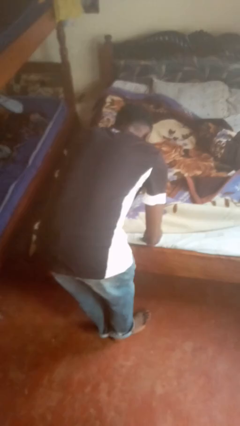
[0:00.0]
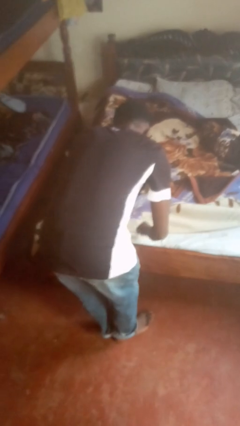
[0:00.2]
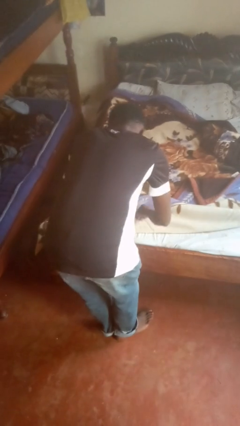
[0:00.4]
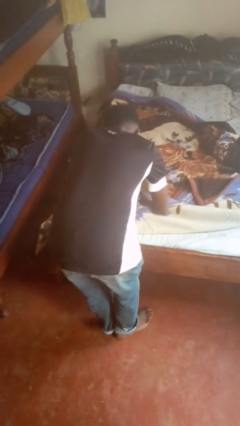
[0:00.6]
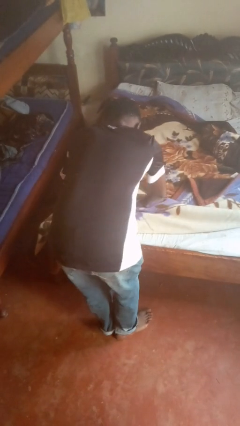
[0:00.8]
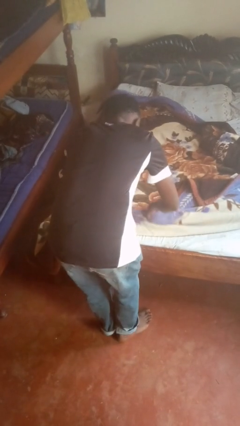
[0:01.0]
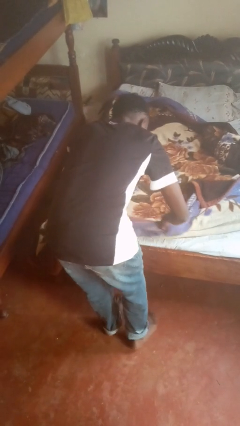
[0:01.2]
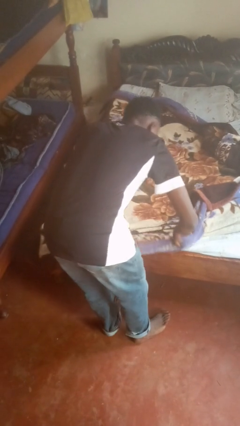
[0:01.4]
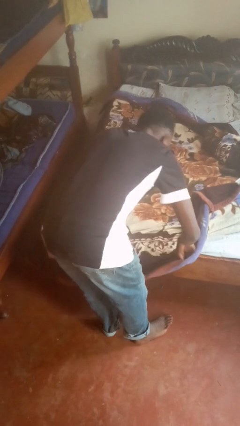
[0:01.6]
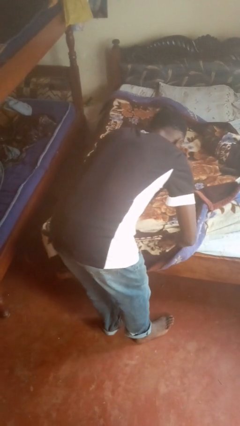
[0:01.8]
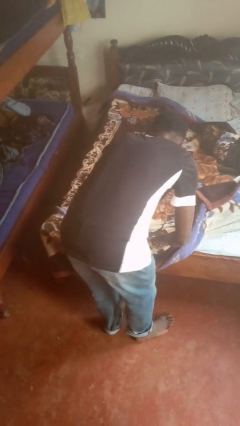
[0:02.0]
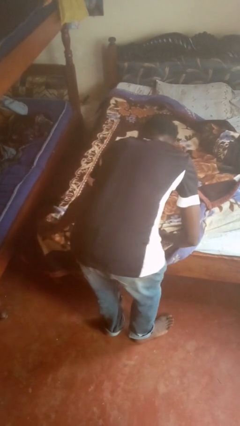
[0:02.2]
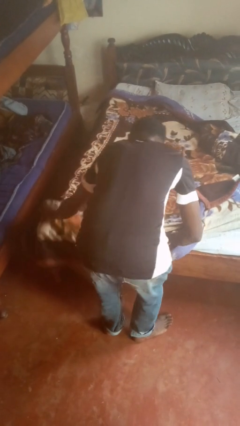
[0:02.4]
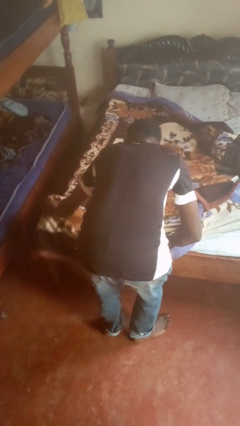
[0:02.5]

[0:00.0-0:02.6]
person makes bed

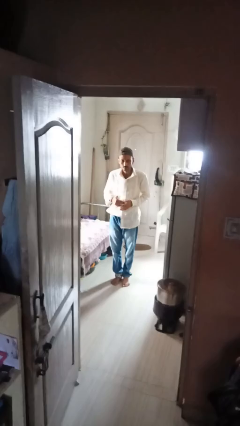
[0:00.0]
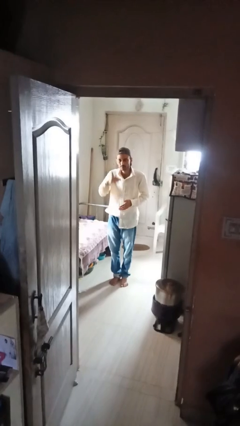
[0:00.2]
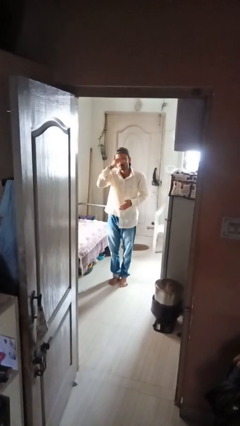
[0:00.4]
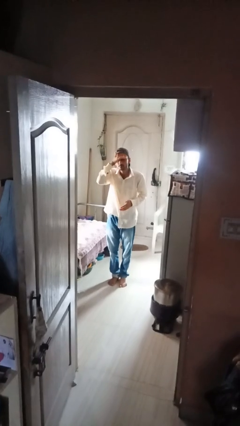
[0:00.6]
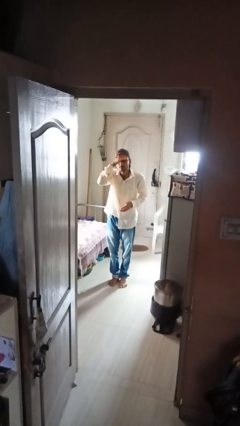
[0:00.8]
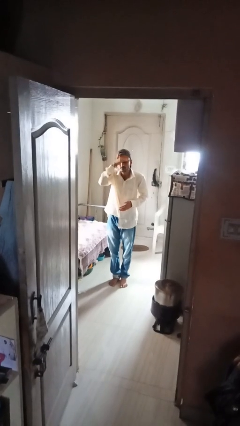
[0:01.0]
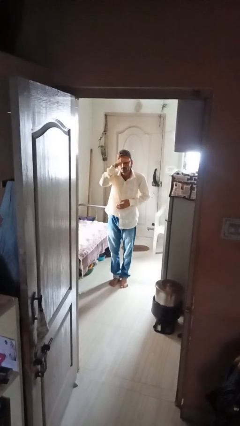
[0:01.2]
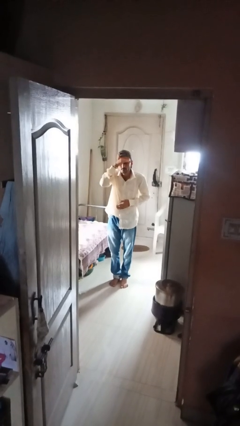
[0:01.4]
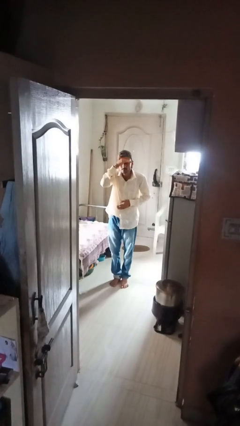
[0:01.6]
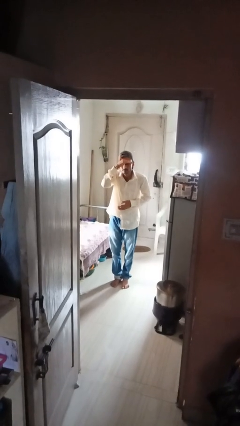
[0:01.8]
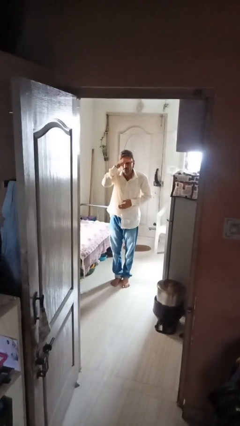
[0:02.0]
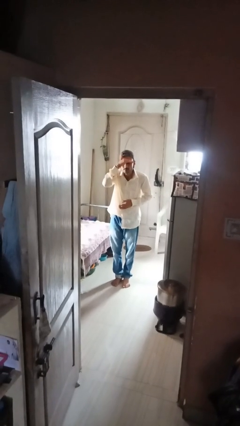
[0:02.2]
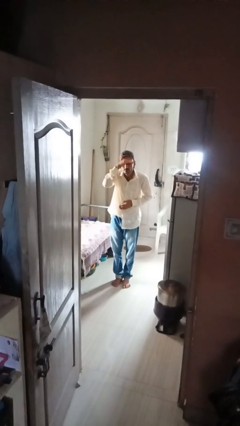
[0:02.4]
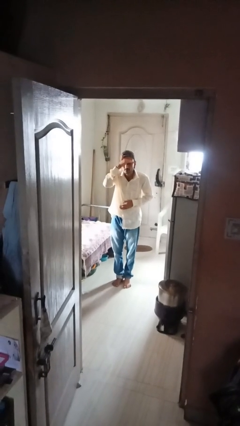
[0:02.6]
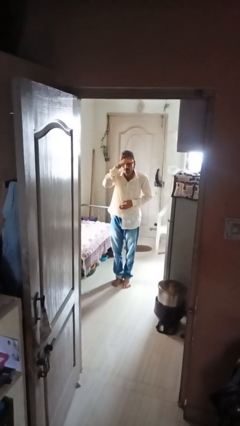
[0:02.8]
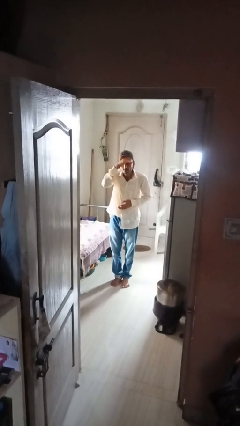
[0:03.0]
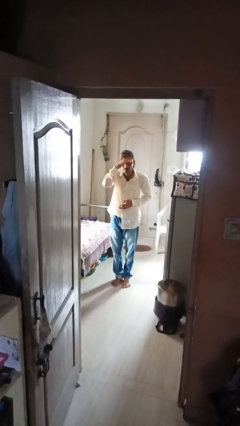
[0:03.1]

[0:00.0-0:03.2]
person shades eyes

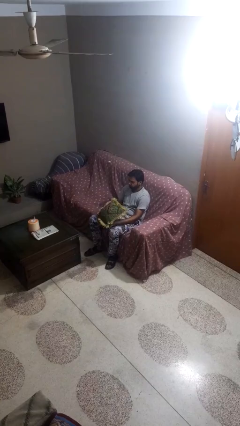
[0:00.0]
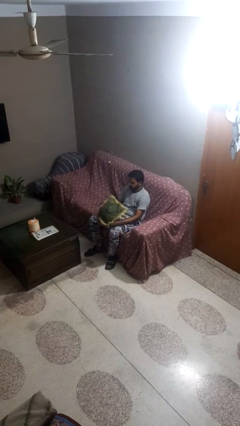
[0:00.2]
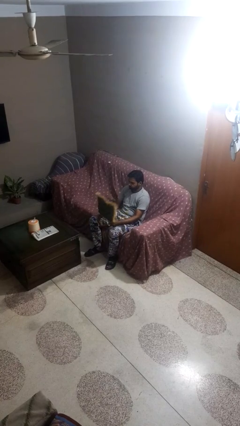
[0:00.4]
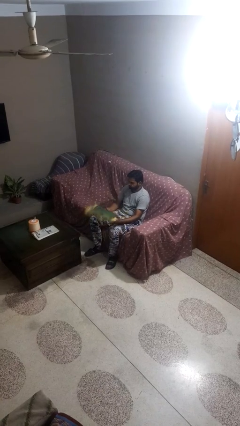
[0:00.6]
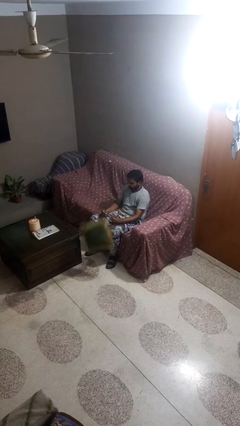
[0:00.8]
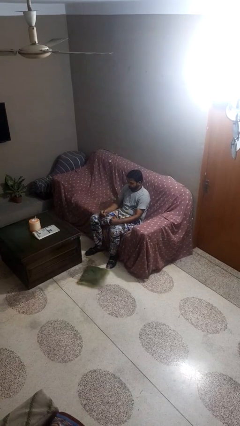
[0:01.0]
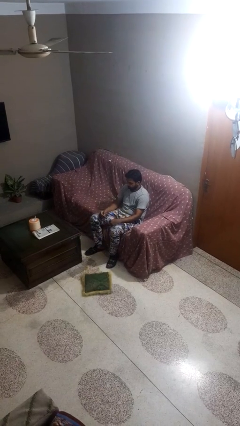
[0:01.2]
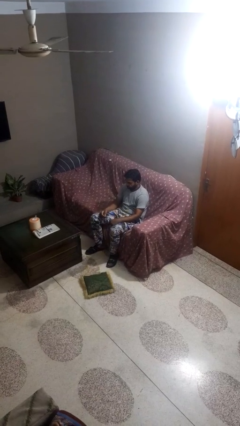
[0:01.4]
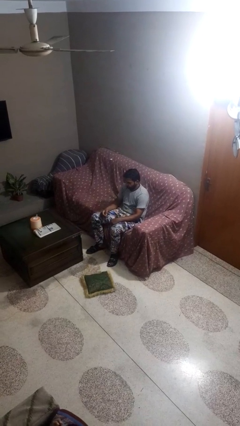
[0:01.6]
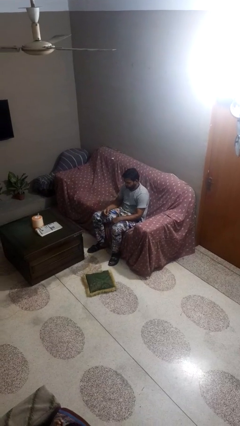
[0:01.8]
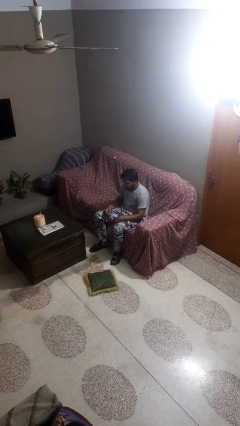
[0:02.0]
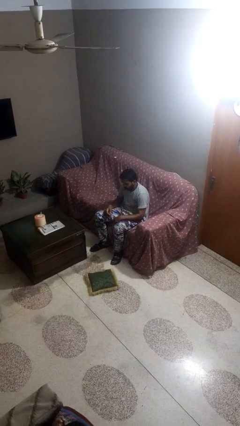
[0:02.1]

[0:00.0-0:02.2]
person drops object

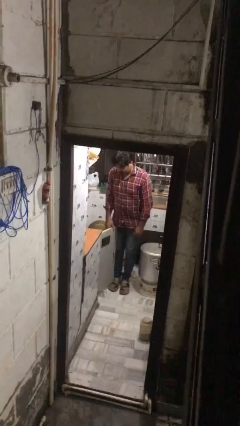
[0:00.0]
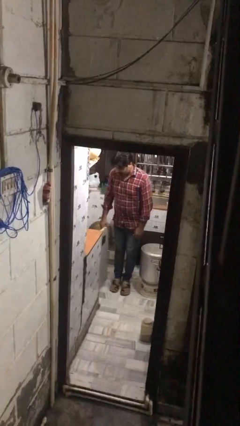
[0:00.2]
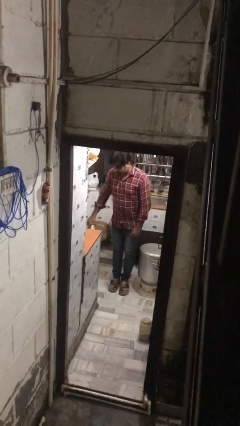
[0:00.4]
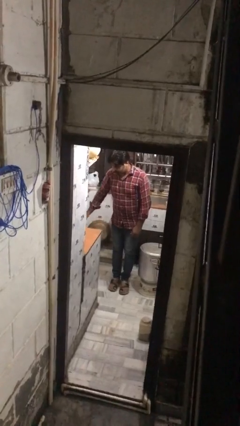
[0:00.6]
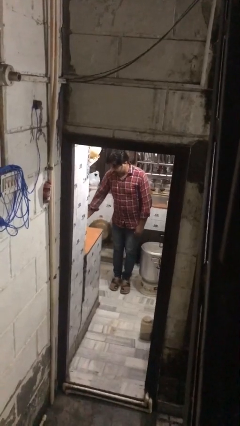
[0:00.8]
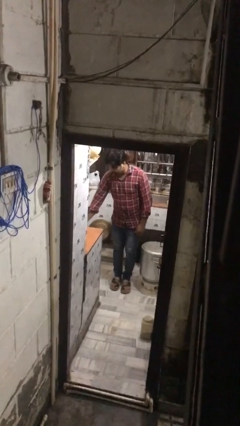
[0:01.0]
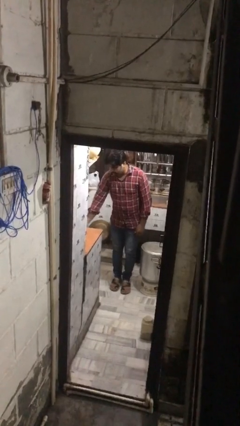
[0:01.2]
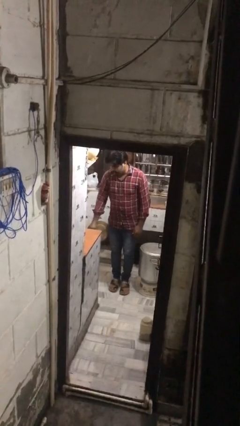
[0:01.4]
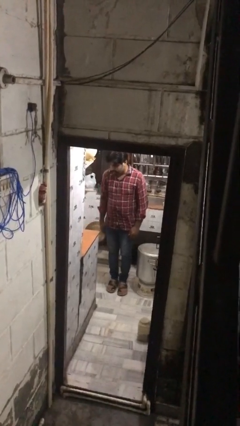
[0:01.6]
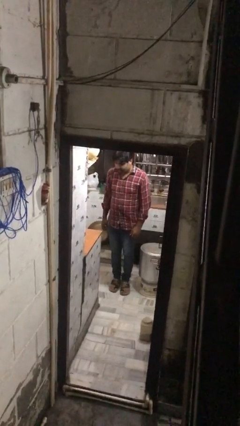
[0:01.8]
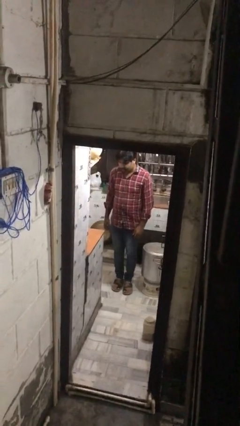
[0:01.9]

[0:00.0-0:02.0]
person closes kitchen drawer

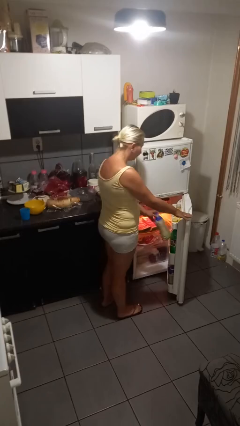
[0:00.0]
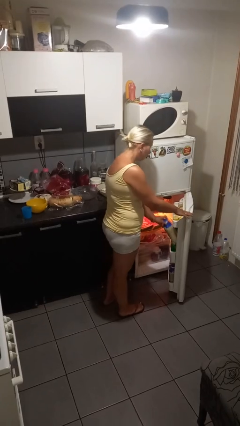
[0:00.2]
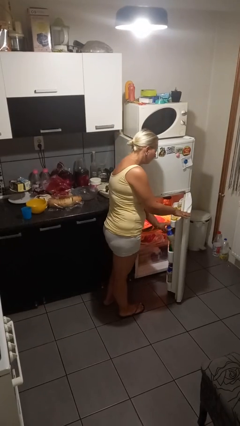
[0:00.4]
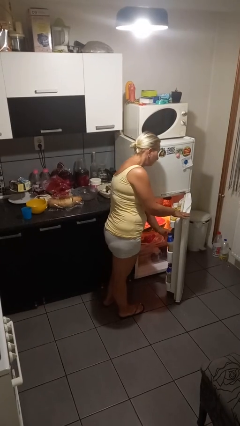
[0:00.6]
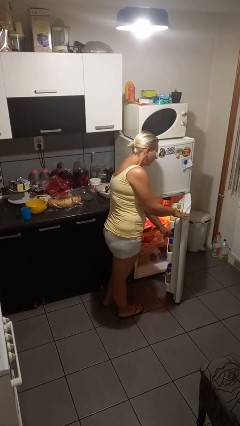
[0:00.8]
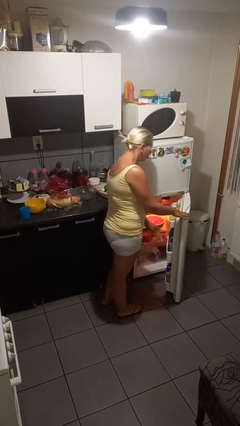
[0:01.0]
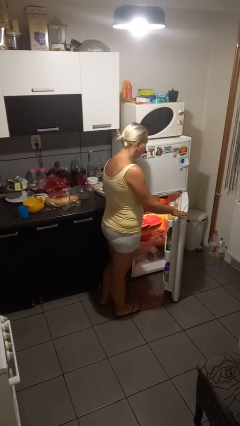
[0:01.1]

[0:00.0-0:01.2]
person puts object into refrigerator

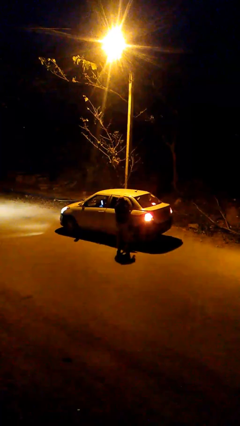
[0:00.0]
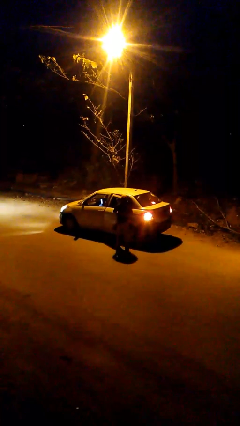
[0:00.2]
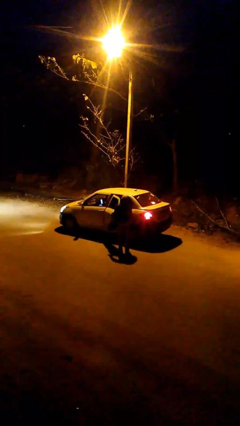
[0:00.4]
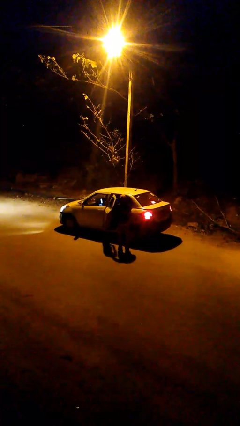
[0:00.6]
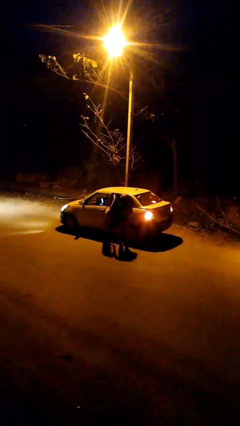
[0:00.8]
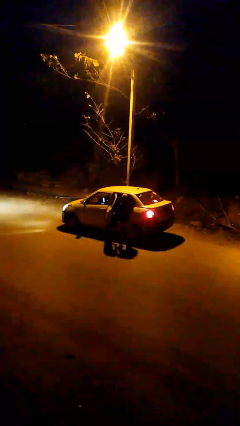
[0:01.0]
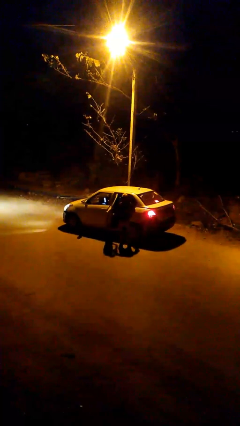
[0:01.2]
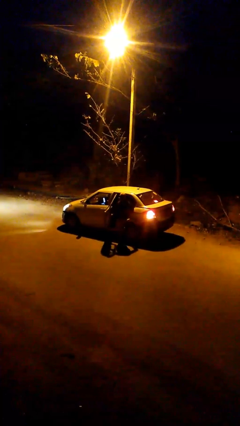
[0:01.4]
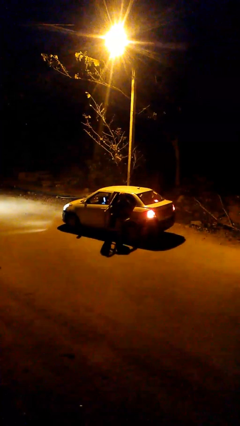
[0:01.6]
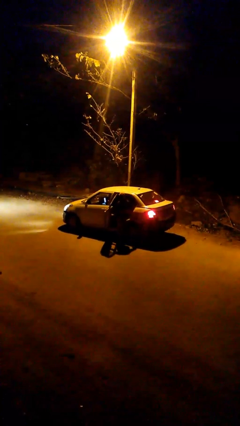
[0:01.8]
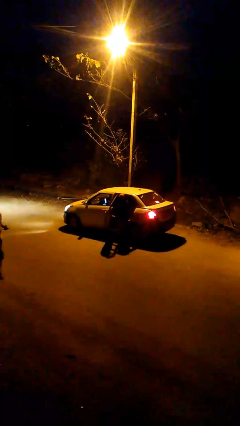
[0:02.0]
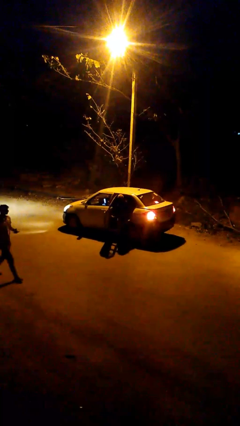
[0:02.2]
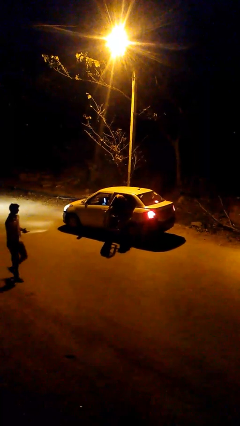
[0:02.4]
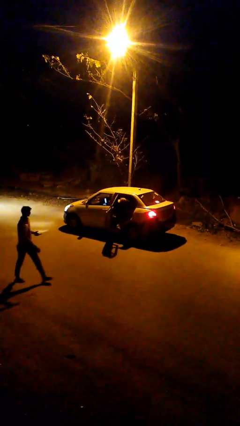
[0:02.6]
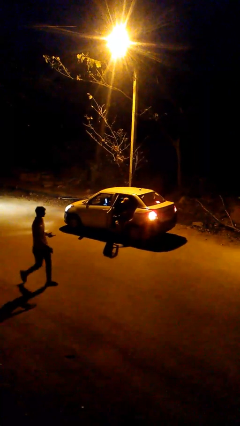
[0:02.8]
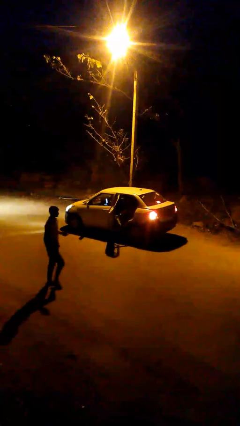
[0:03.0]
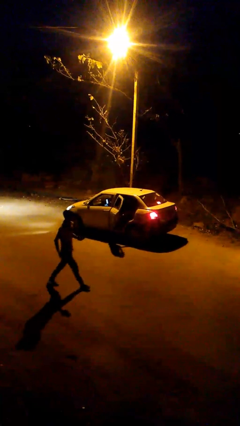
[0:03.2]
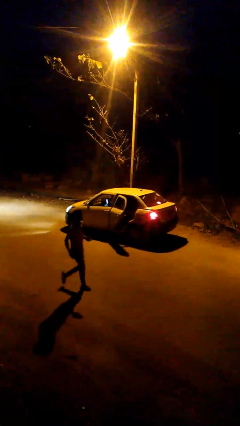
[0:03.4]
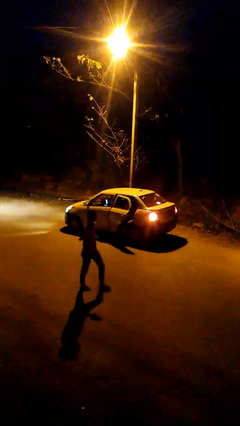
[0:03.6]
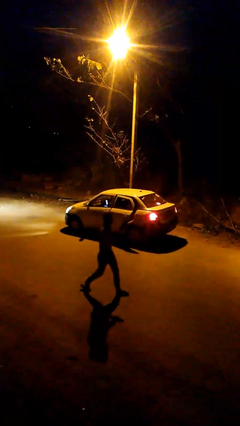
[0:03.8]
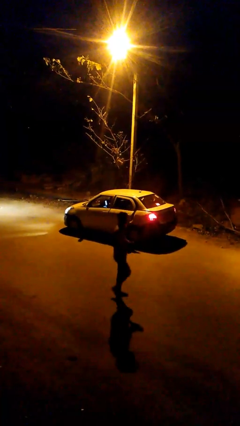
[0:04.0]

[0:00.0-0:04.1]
car picks up person

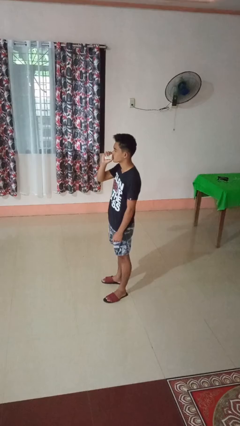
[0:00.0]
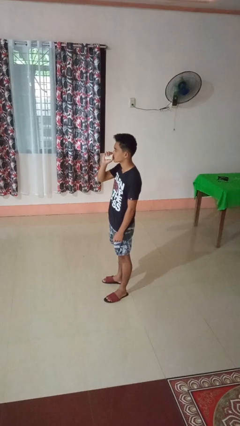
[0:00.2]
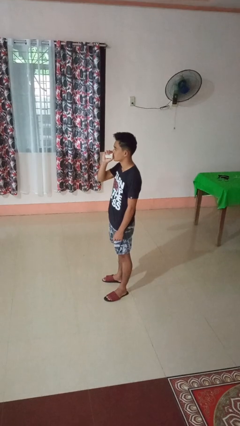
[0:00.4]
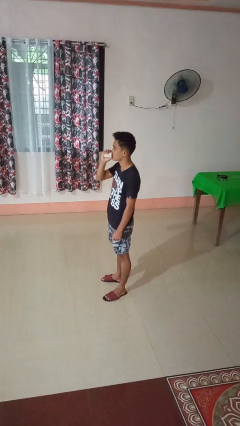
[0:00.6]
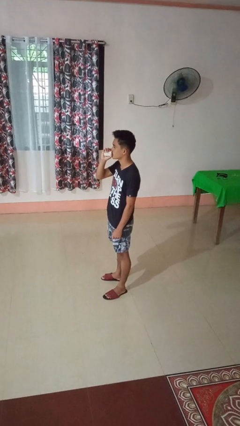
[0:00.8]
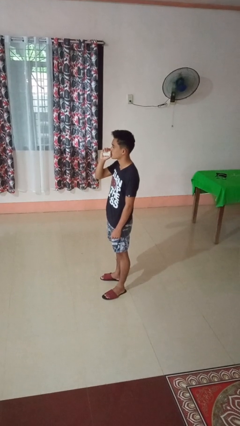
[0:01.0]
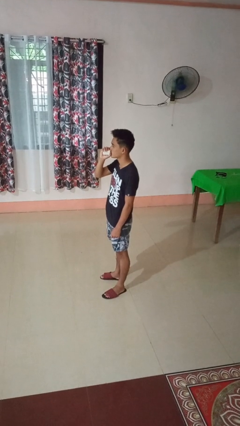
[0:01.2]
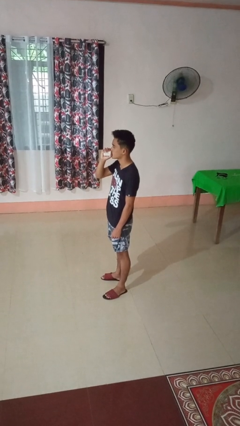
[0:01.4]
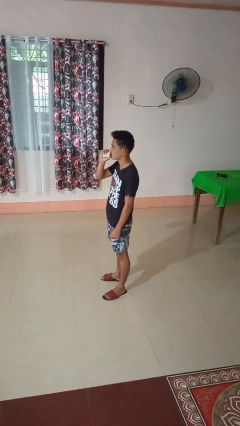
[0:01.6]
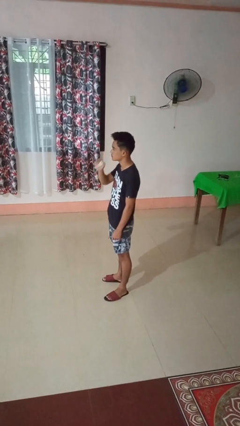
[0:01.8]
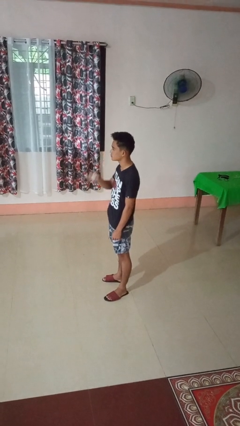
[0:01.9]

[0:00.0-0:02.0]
person vapes
